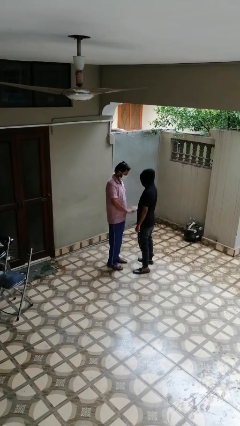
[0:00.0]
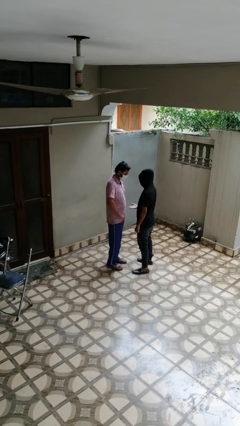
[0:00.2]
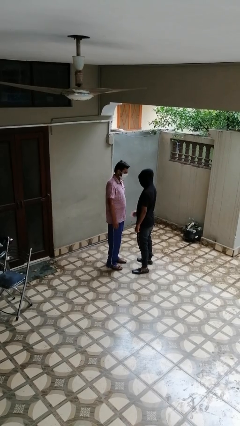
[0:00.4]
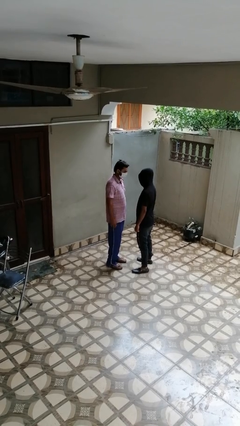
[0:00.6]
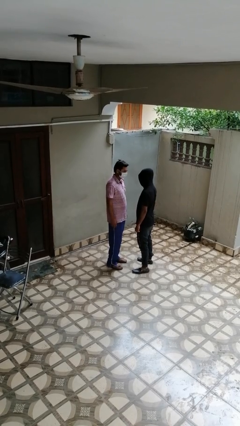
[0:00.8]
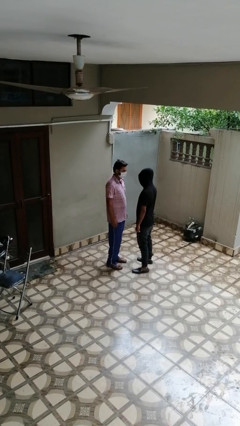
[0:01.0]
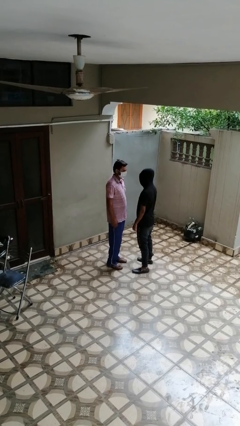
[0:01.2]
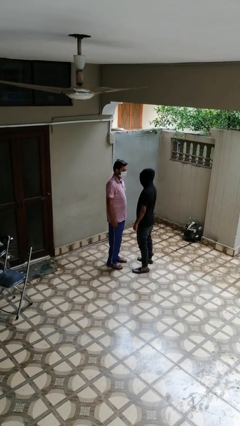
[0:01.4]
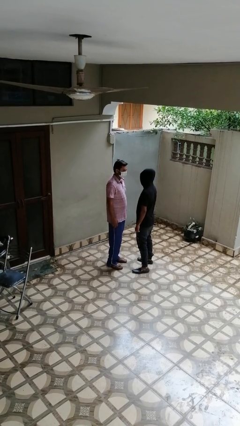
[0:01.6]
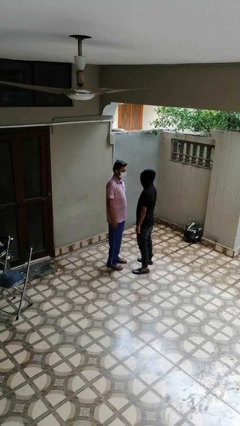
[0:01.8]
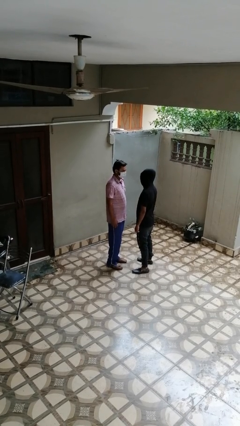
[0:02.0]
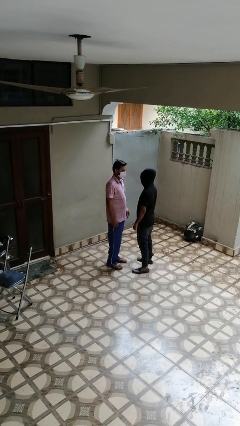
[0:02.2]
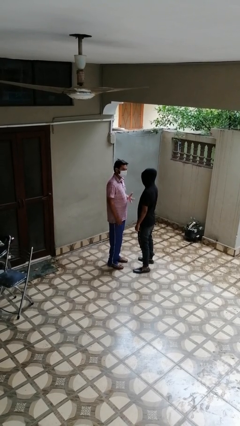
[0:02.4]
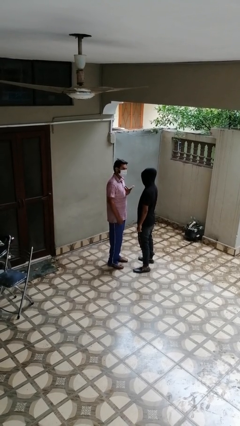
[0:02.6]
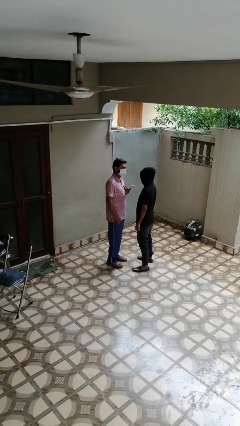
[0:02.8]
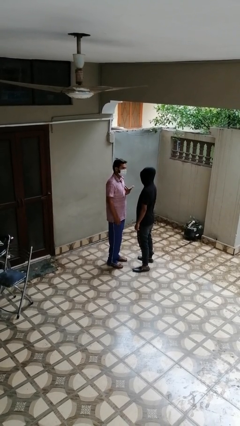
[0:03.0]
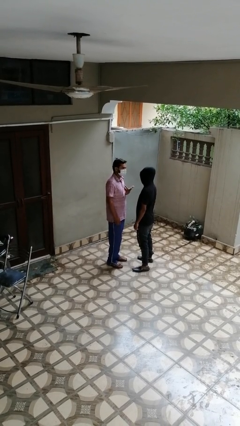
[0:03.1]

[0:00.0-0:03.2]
person highfives hand

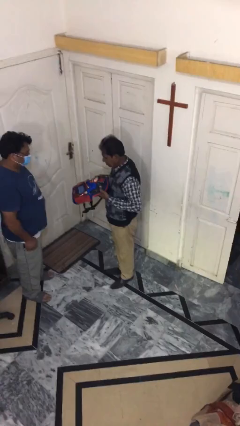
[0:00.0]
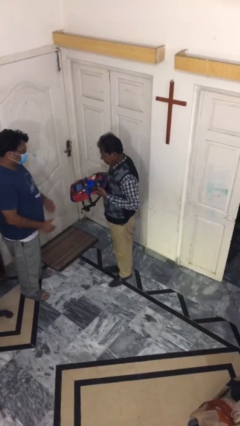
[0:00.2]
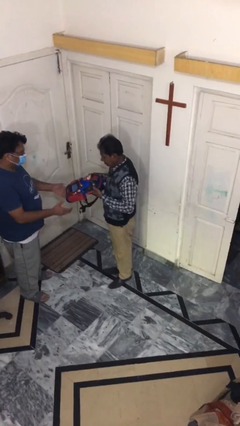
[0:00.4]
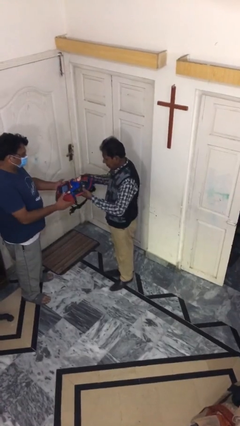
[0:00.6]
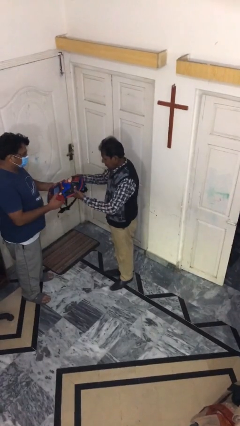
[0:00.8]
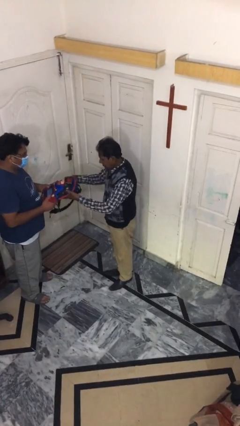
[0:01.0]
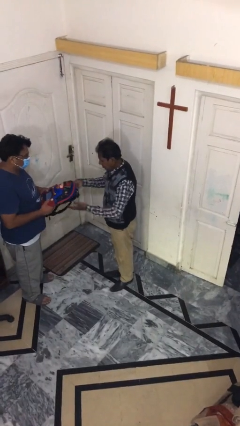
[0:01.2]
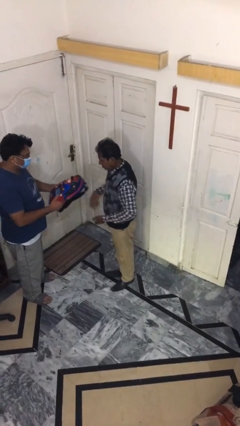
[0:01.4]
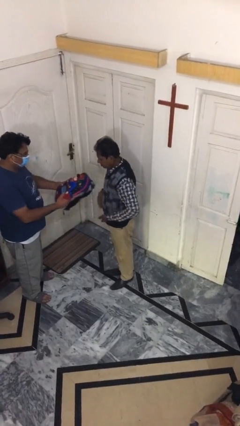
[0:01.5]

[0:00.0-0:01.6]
person transfers object to person

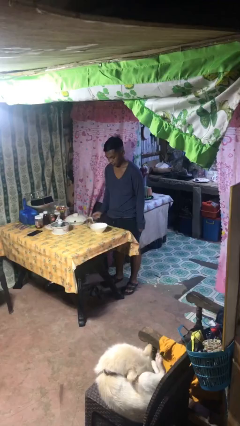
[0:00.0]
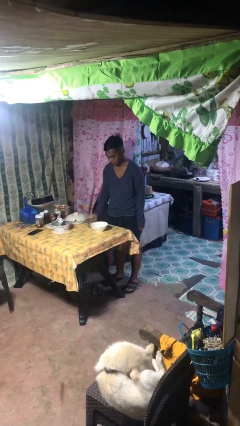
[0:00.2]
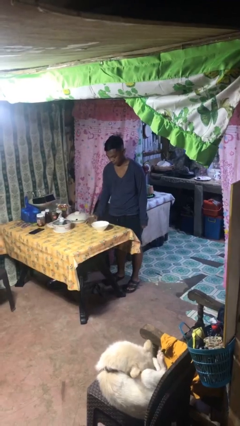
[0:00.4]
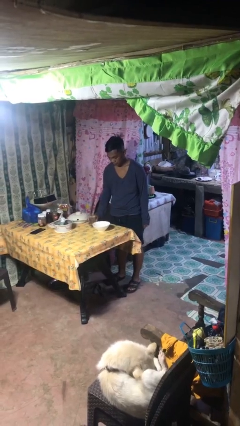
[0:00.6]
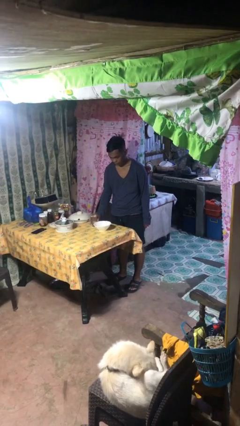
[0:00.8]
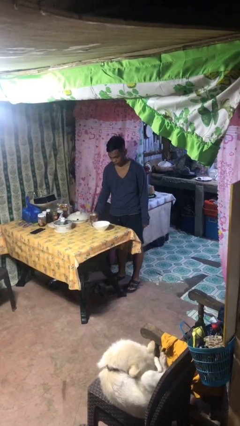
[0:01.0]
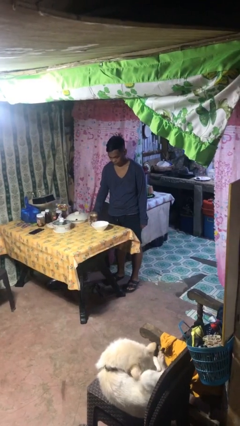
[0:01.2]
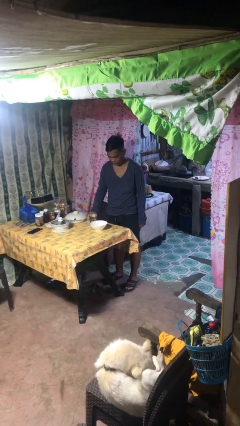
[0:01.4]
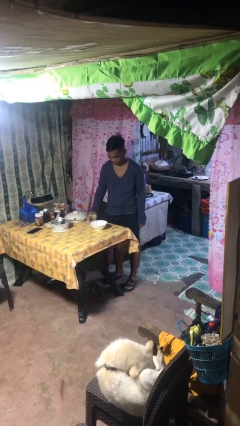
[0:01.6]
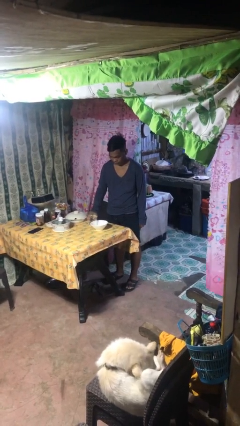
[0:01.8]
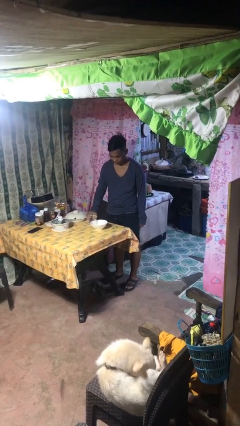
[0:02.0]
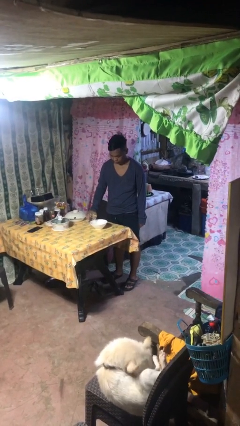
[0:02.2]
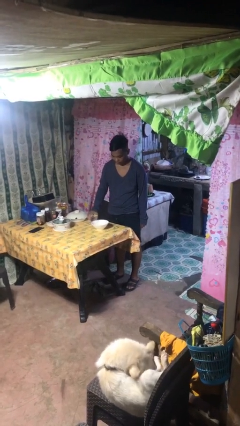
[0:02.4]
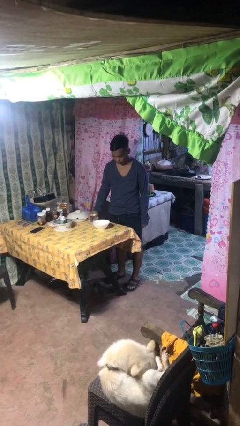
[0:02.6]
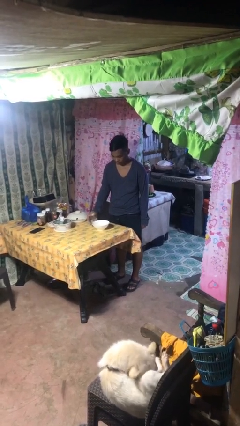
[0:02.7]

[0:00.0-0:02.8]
person pours into bowl

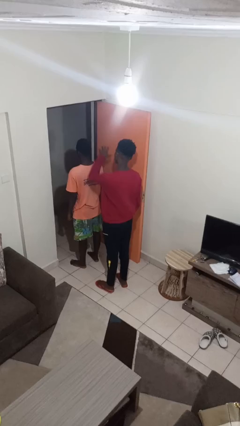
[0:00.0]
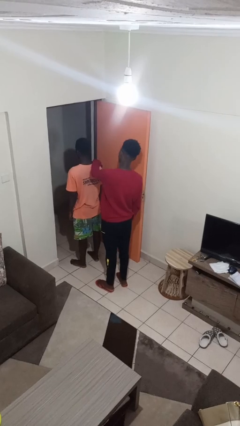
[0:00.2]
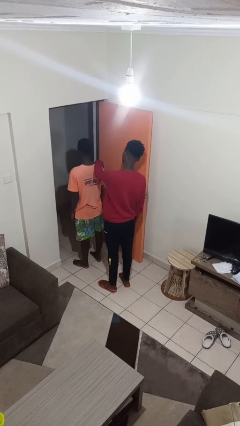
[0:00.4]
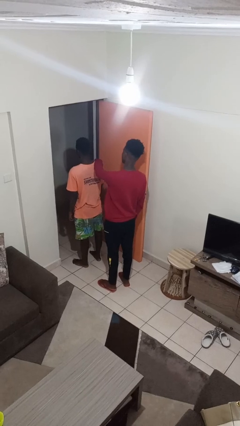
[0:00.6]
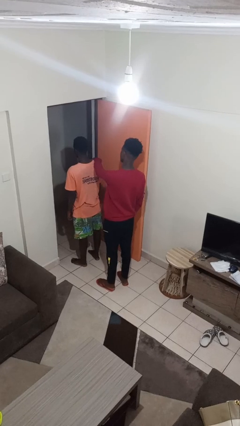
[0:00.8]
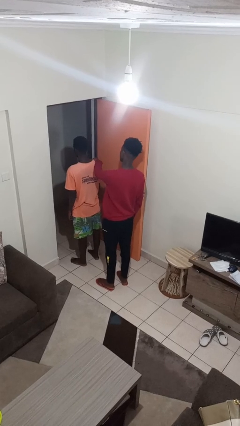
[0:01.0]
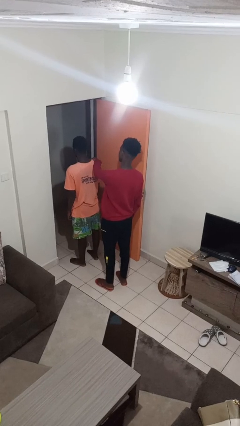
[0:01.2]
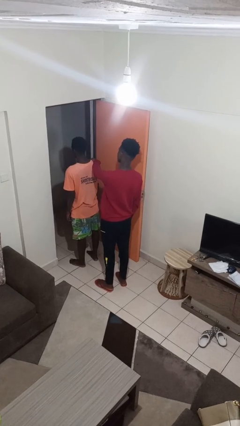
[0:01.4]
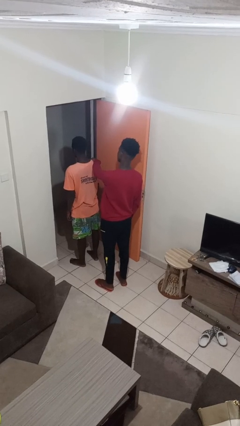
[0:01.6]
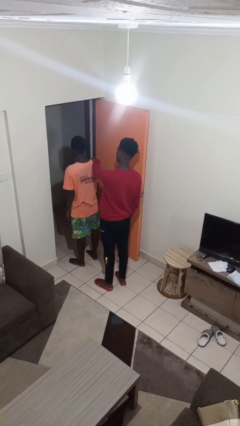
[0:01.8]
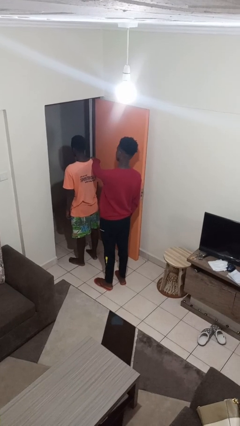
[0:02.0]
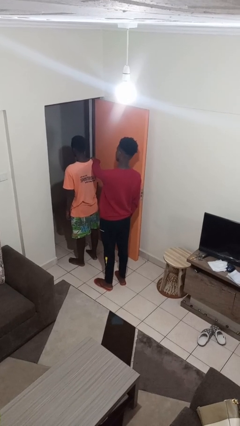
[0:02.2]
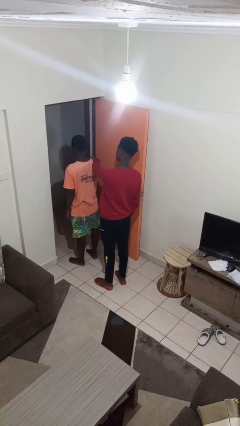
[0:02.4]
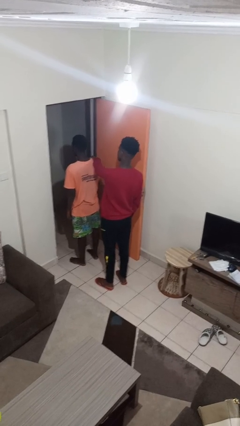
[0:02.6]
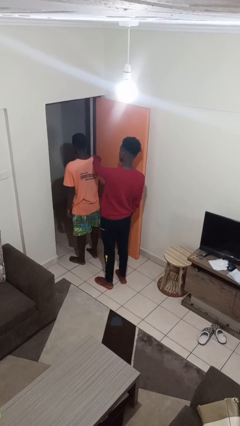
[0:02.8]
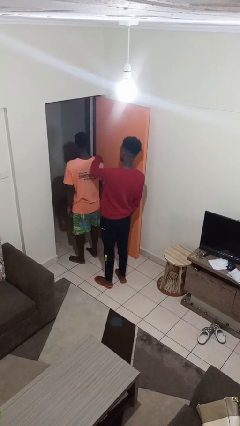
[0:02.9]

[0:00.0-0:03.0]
person grabs person by shoulder

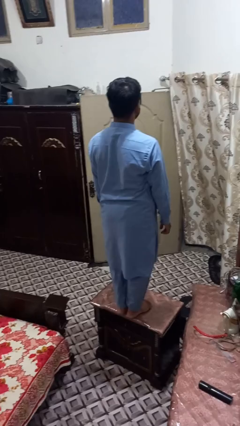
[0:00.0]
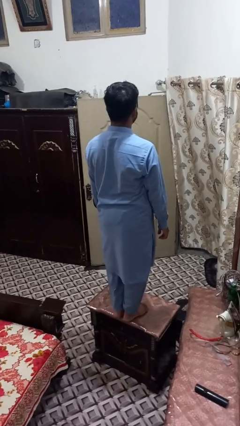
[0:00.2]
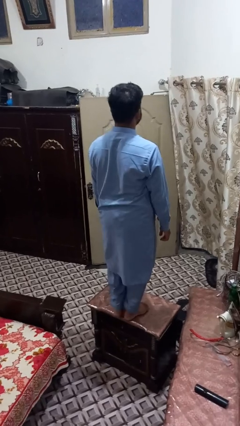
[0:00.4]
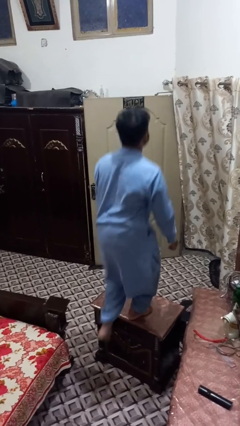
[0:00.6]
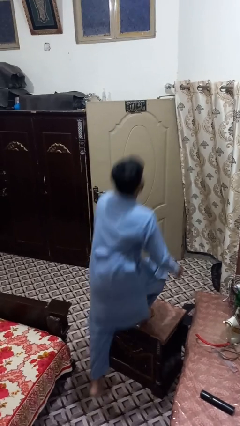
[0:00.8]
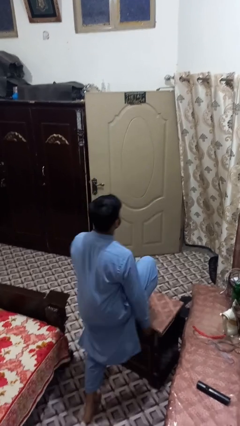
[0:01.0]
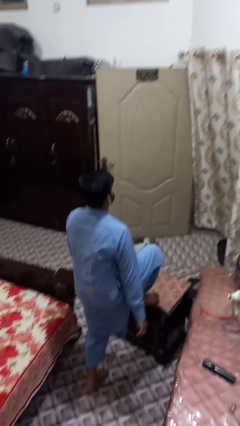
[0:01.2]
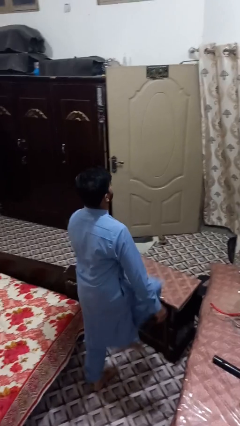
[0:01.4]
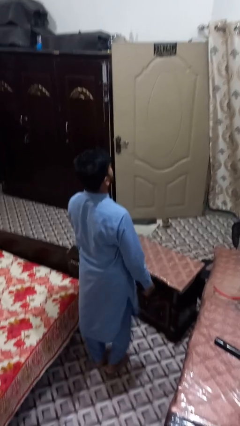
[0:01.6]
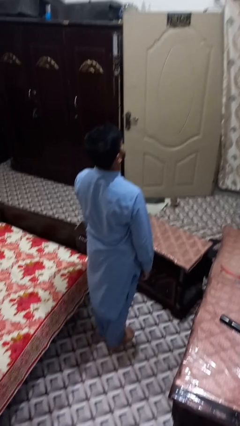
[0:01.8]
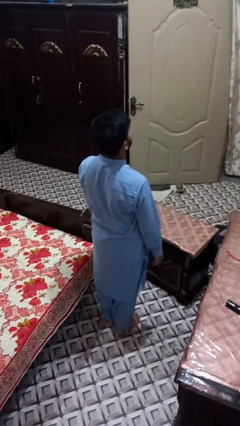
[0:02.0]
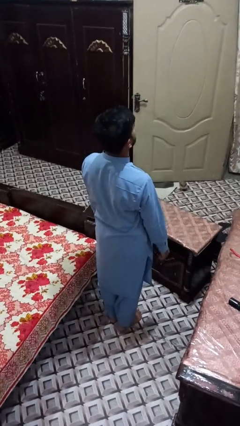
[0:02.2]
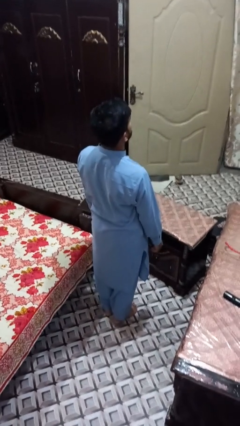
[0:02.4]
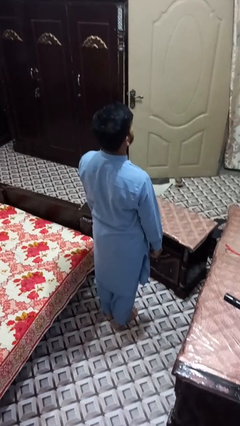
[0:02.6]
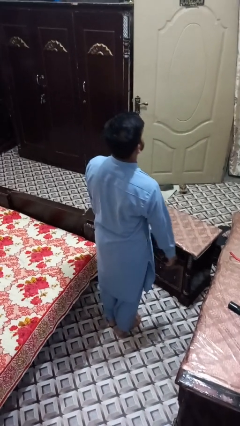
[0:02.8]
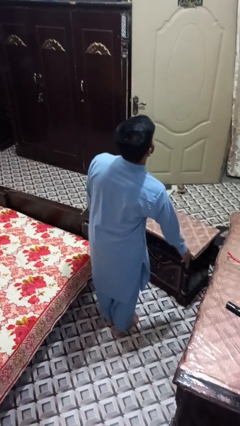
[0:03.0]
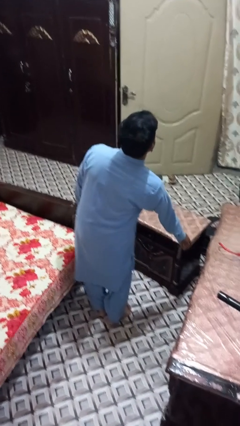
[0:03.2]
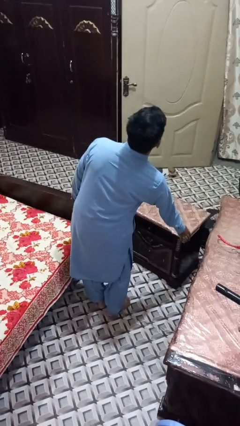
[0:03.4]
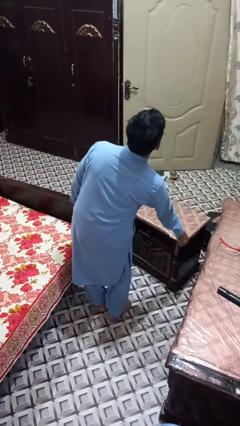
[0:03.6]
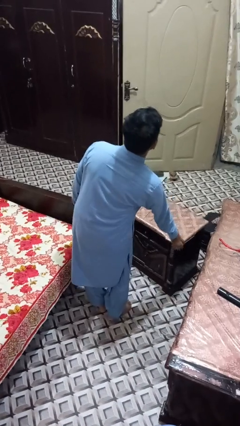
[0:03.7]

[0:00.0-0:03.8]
person climbs off table

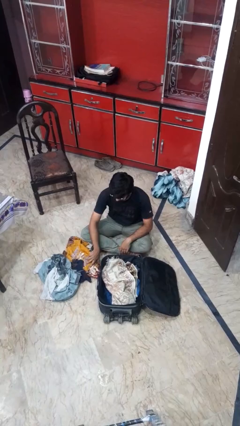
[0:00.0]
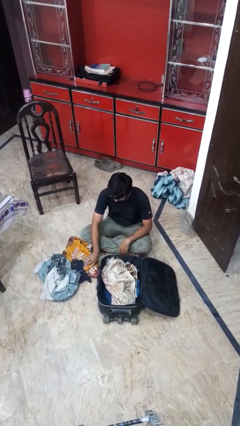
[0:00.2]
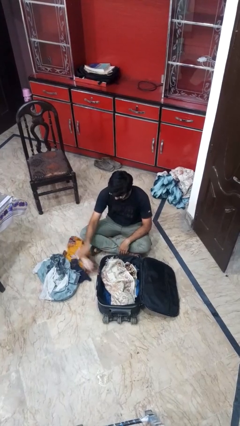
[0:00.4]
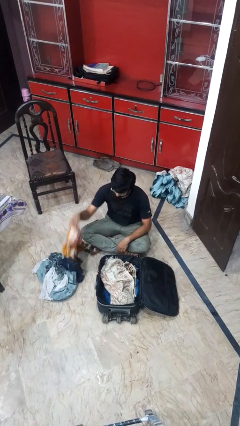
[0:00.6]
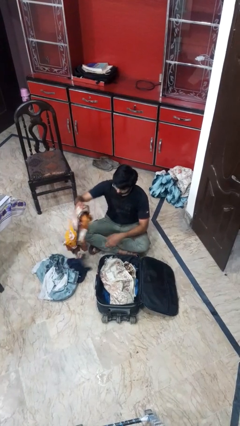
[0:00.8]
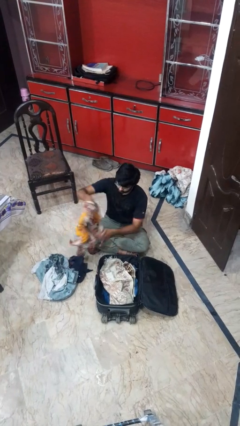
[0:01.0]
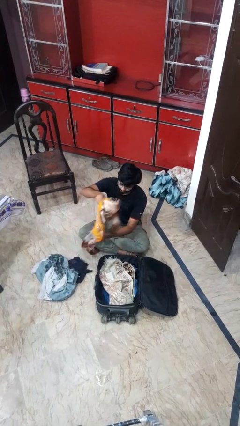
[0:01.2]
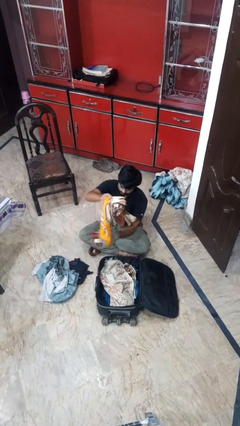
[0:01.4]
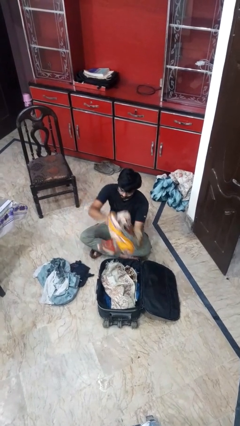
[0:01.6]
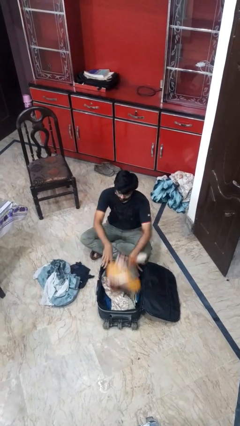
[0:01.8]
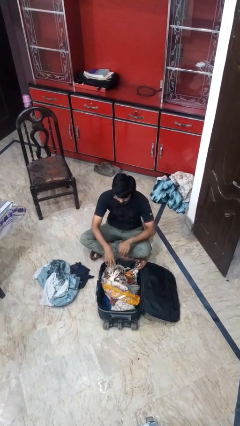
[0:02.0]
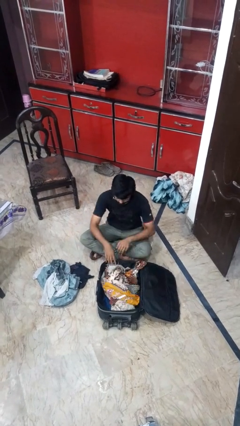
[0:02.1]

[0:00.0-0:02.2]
person loads clothes into suitcase

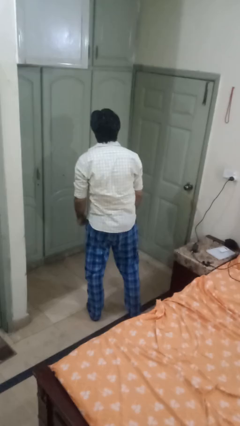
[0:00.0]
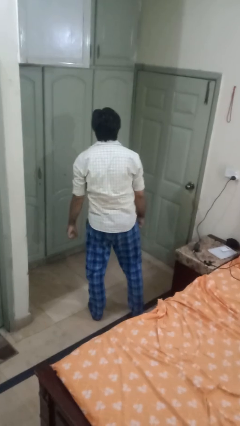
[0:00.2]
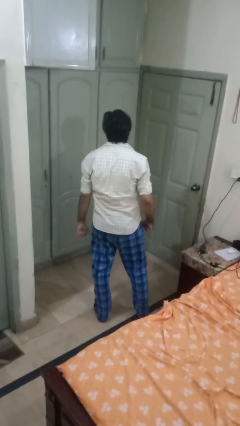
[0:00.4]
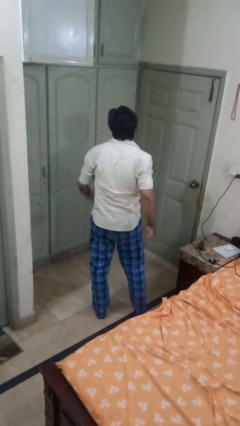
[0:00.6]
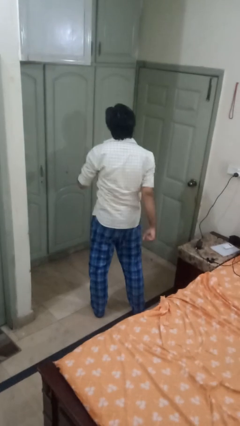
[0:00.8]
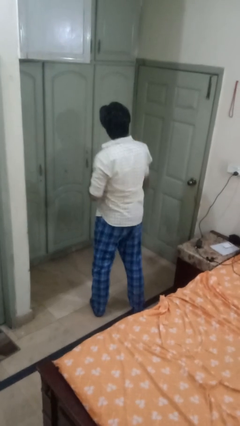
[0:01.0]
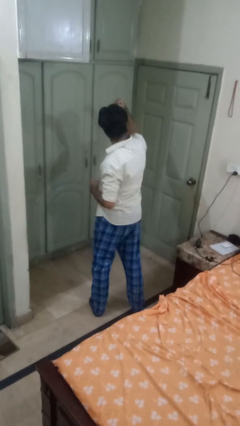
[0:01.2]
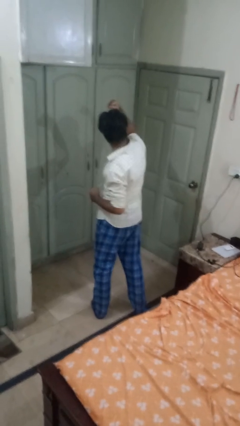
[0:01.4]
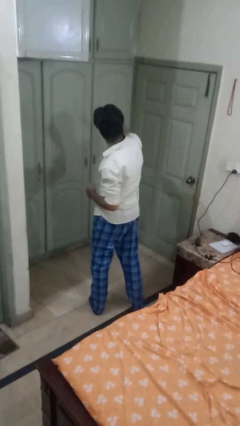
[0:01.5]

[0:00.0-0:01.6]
person punches
